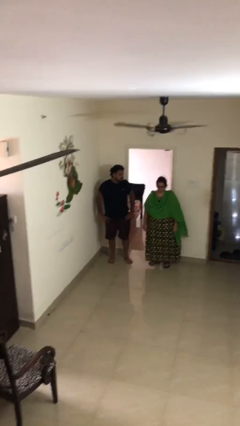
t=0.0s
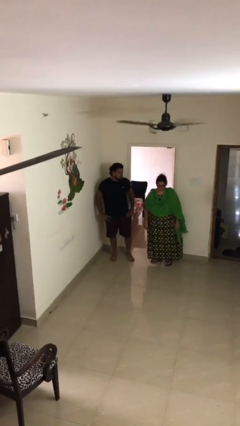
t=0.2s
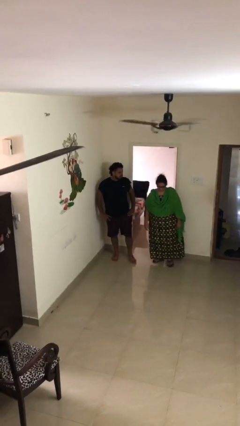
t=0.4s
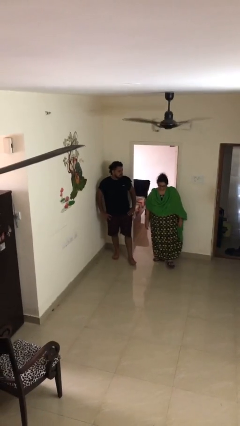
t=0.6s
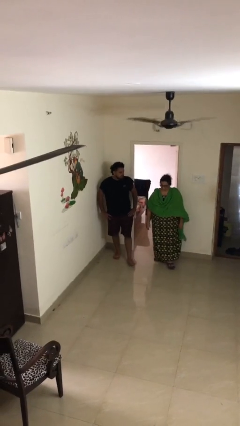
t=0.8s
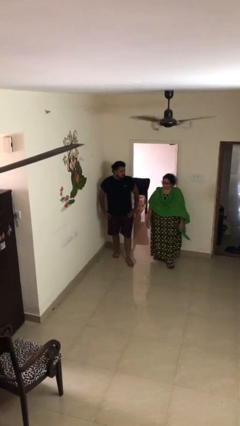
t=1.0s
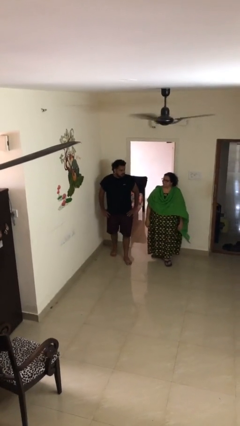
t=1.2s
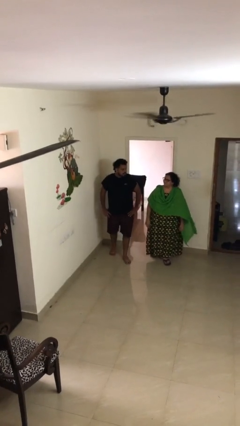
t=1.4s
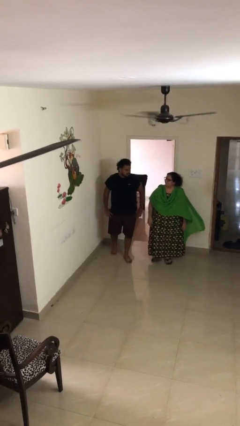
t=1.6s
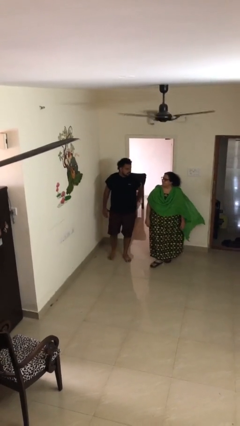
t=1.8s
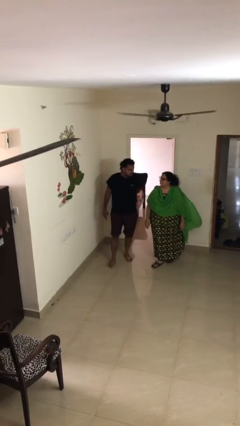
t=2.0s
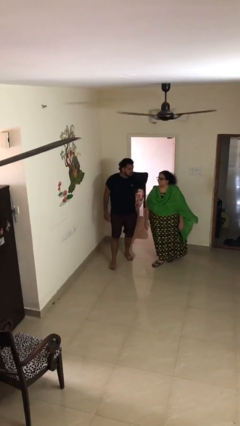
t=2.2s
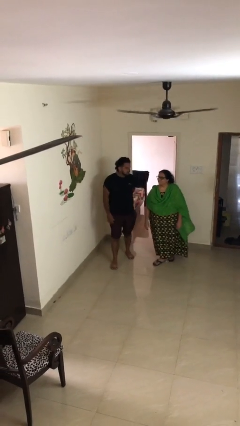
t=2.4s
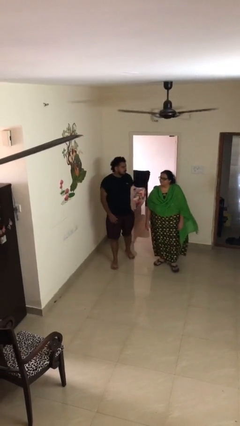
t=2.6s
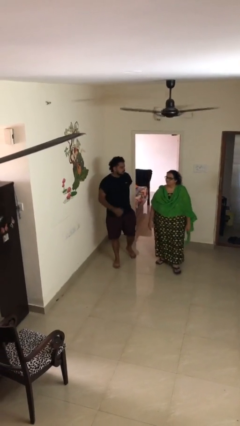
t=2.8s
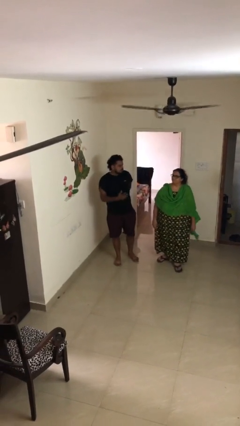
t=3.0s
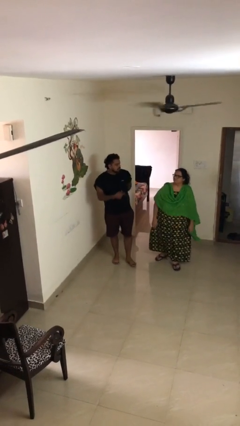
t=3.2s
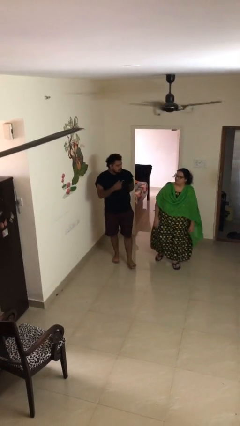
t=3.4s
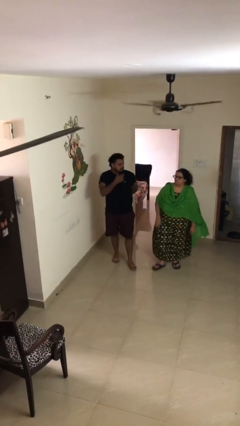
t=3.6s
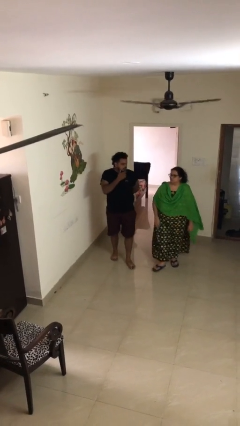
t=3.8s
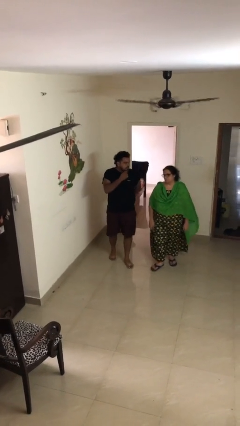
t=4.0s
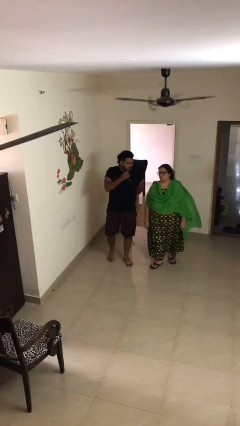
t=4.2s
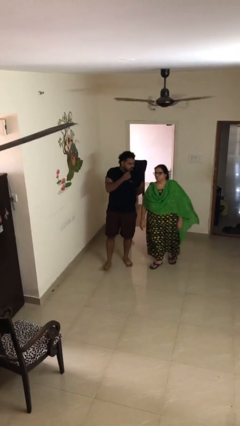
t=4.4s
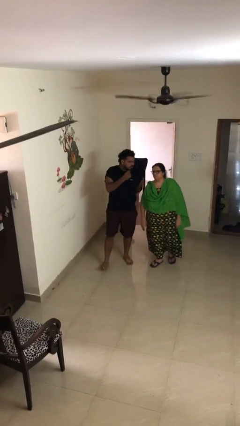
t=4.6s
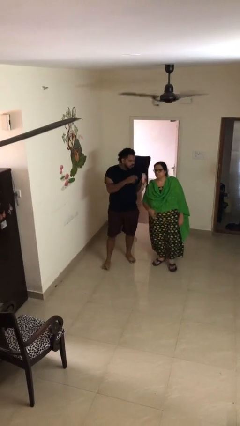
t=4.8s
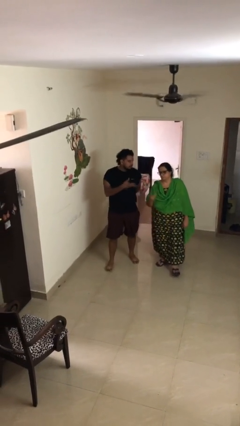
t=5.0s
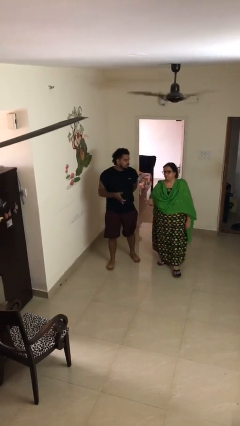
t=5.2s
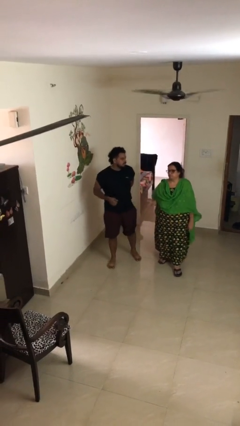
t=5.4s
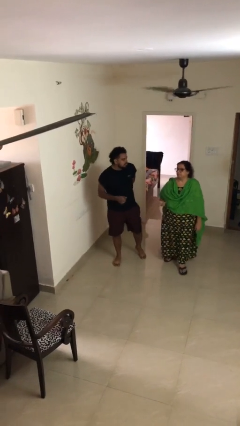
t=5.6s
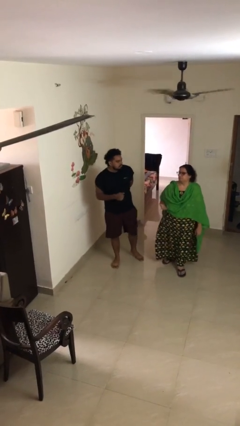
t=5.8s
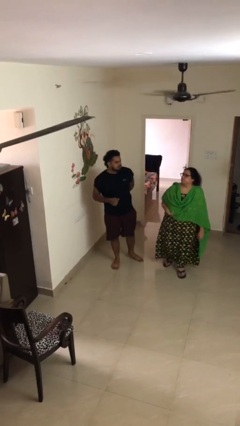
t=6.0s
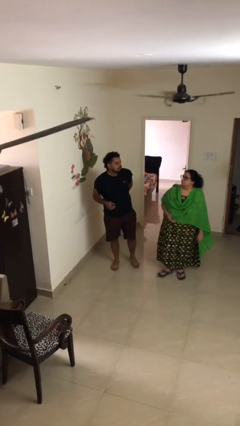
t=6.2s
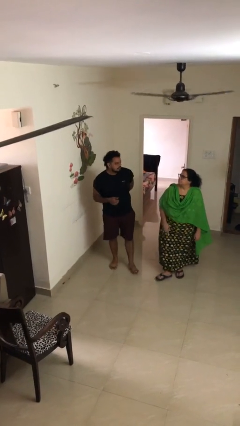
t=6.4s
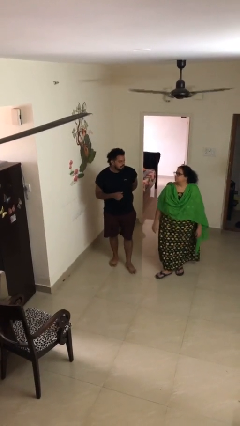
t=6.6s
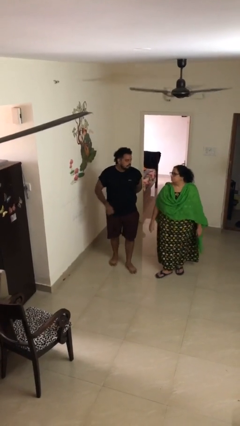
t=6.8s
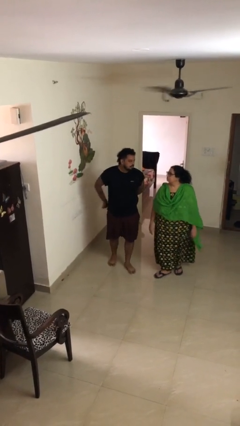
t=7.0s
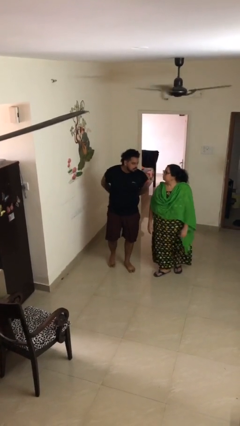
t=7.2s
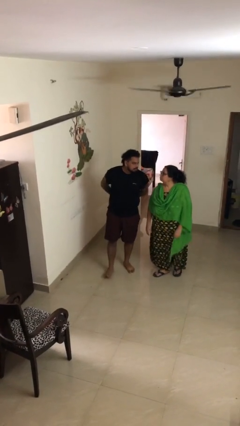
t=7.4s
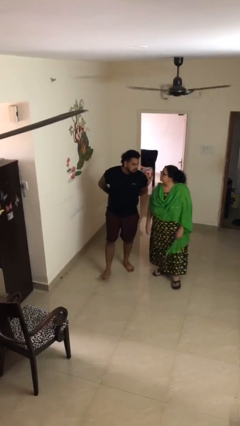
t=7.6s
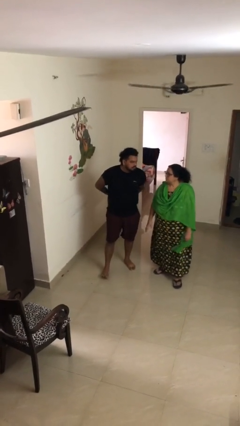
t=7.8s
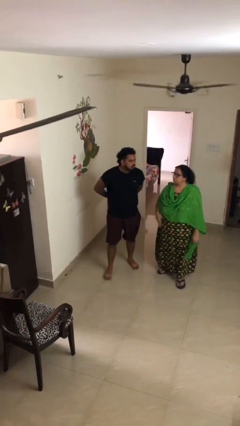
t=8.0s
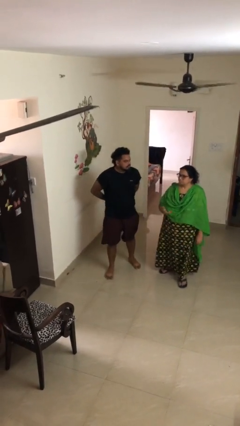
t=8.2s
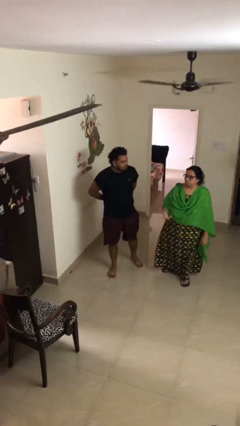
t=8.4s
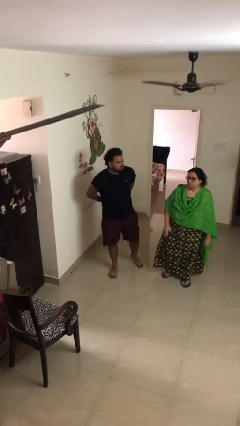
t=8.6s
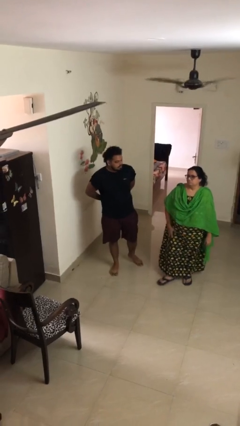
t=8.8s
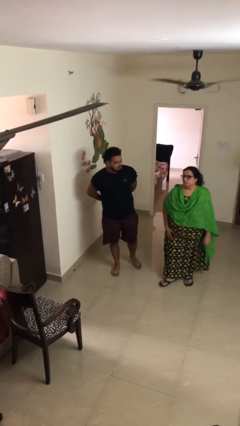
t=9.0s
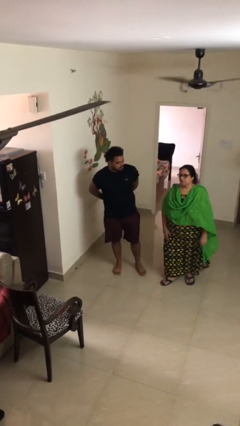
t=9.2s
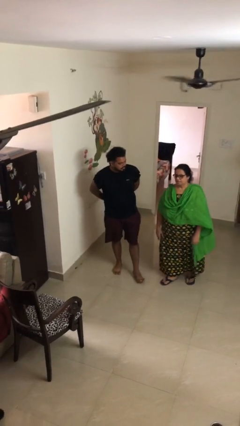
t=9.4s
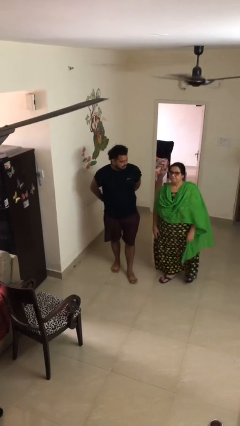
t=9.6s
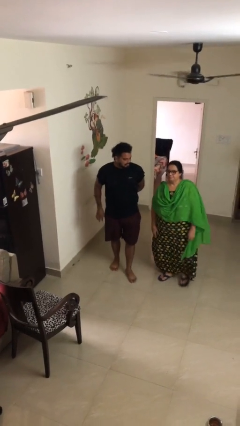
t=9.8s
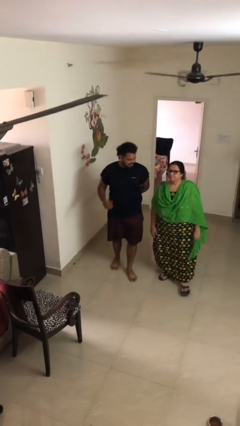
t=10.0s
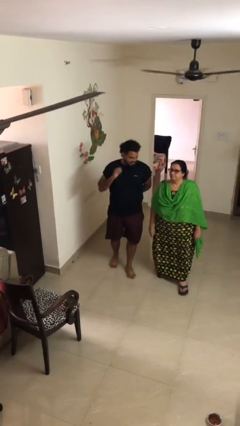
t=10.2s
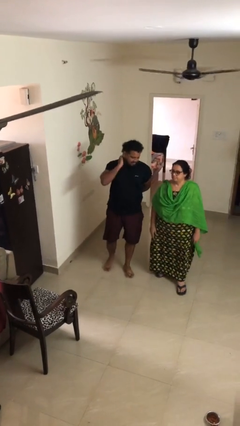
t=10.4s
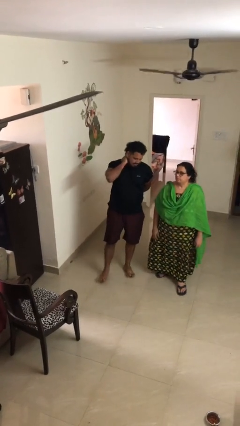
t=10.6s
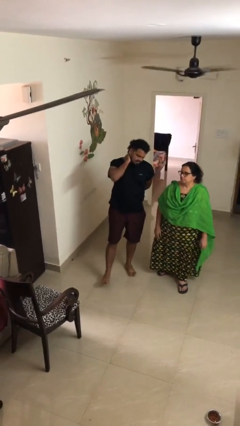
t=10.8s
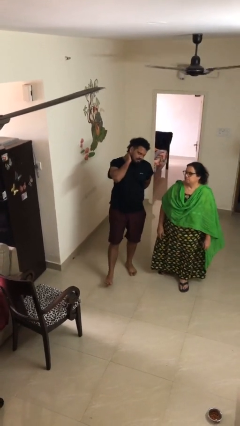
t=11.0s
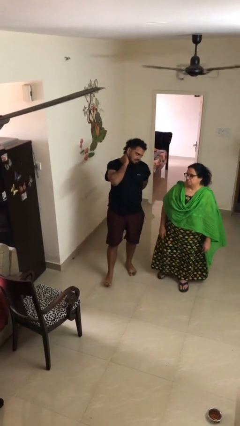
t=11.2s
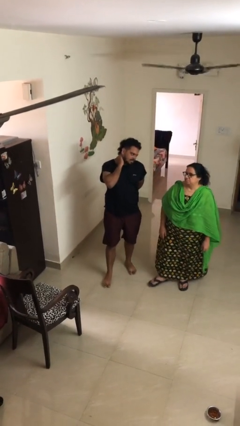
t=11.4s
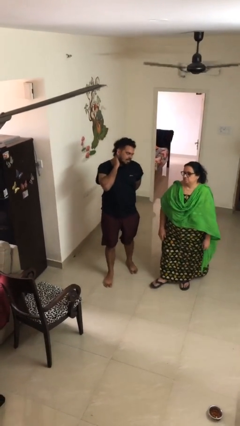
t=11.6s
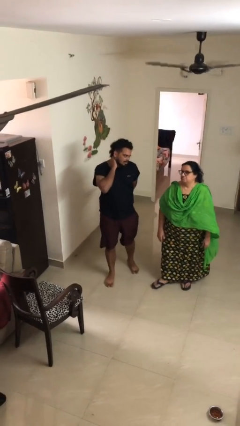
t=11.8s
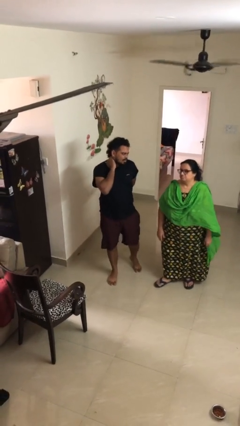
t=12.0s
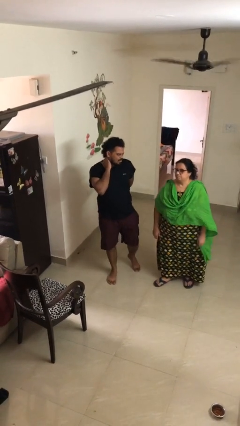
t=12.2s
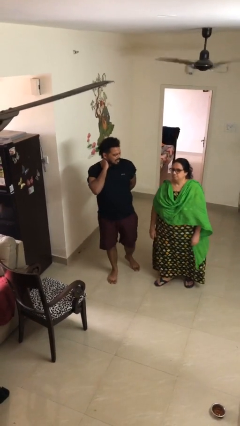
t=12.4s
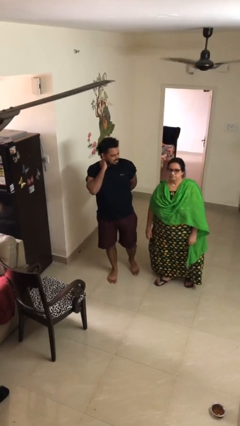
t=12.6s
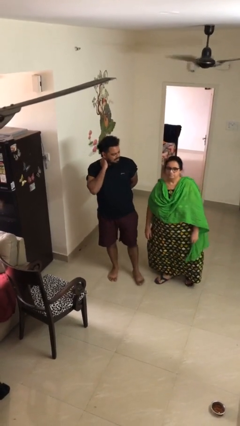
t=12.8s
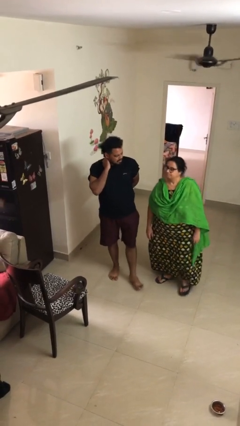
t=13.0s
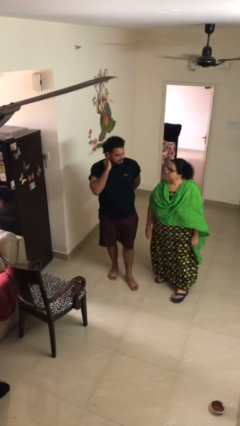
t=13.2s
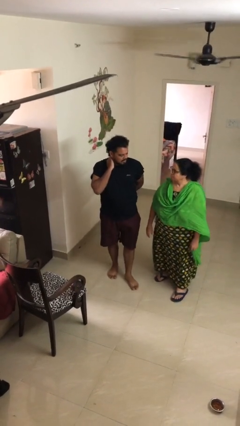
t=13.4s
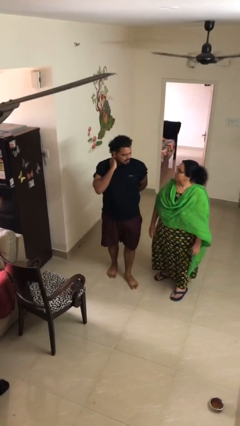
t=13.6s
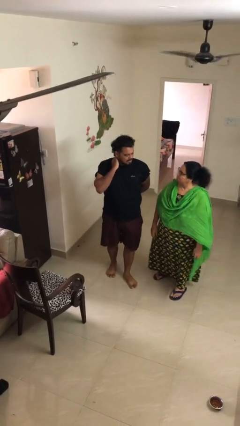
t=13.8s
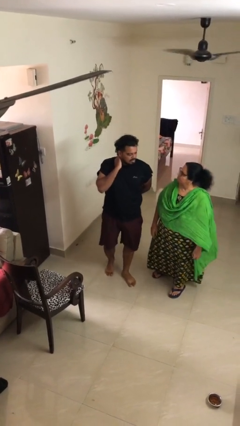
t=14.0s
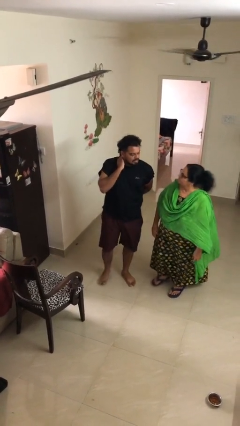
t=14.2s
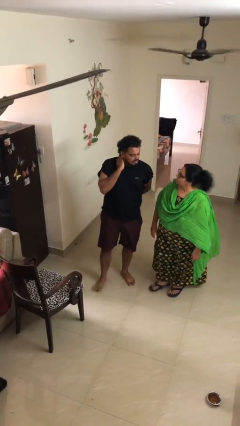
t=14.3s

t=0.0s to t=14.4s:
person talks to person

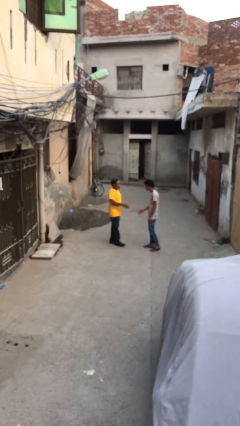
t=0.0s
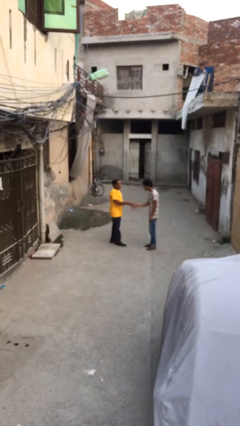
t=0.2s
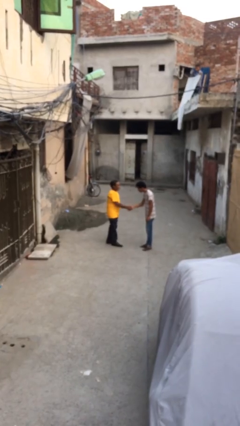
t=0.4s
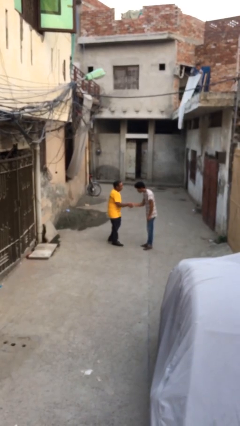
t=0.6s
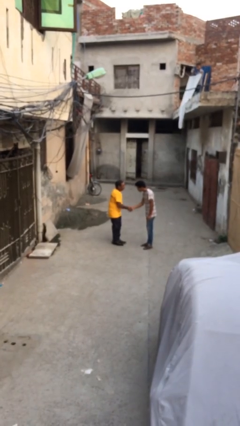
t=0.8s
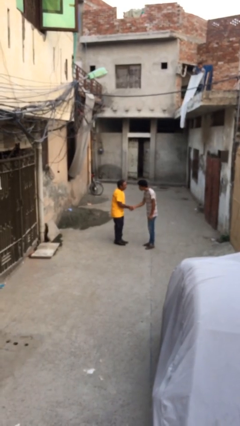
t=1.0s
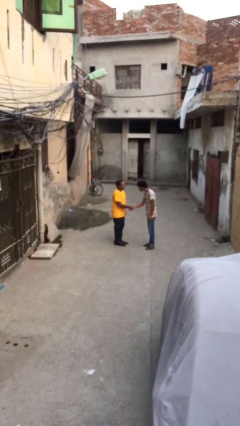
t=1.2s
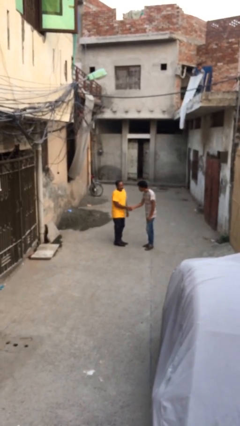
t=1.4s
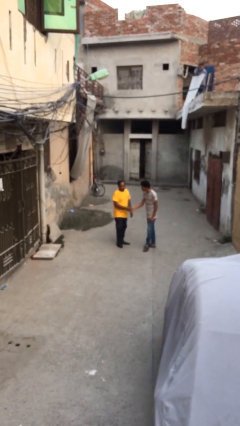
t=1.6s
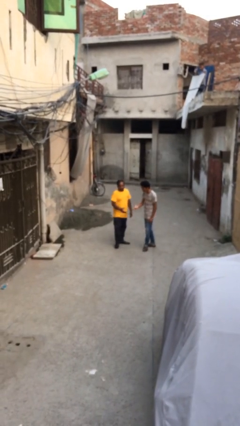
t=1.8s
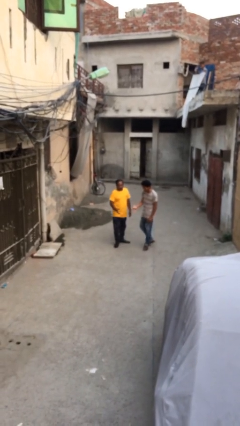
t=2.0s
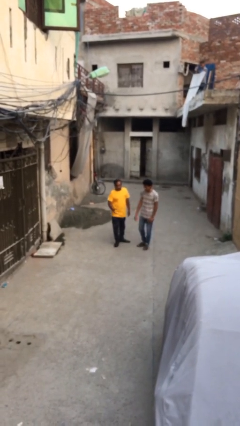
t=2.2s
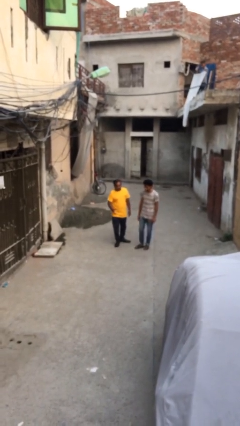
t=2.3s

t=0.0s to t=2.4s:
person shakes hand

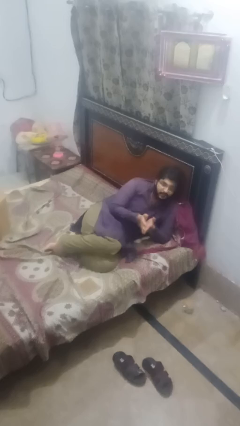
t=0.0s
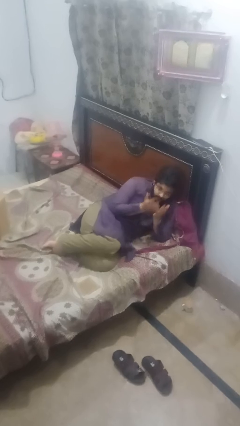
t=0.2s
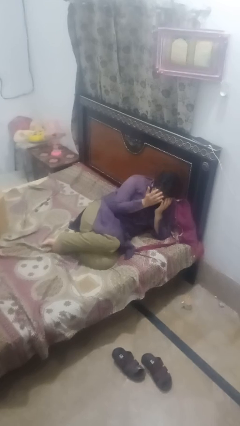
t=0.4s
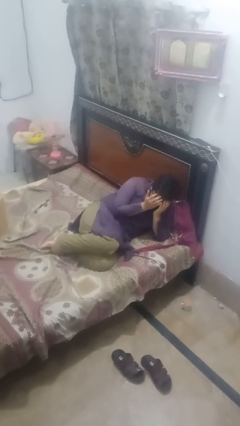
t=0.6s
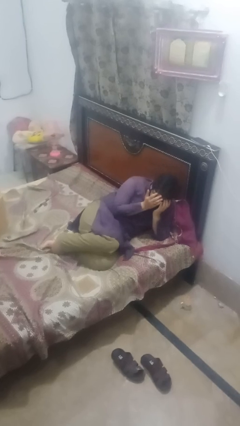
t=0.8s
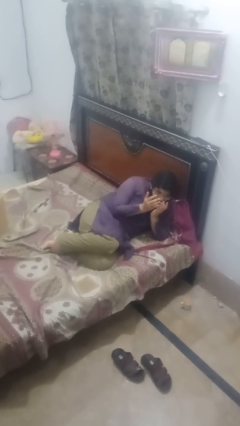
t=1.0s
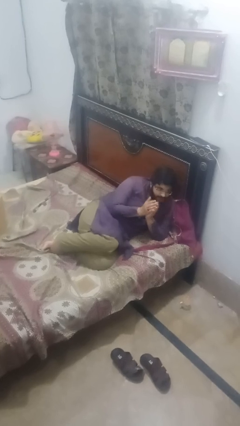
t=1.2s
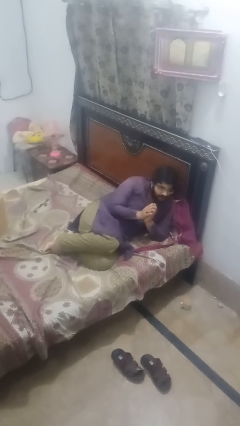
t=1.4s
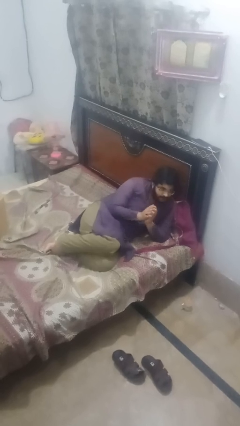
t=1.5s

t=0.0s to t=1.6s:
person covers face with hands
